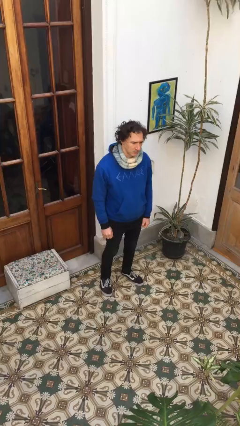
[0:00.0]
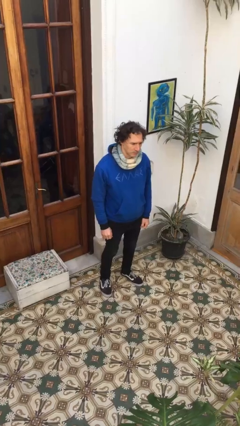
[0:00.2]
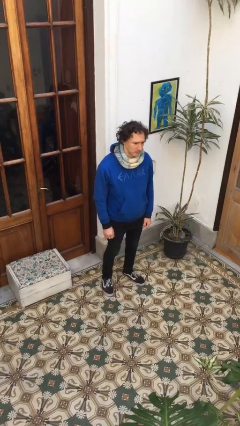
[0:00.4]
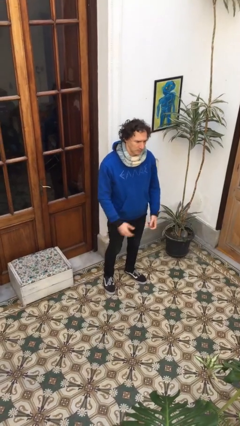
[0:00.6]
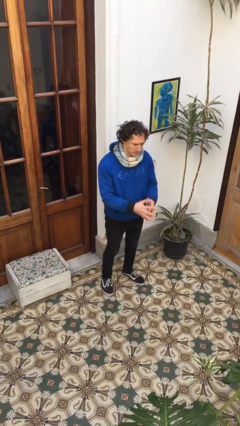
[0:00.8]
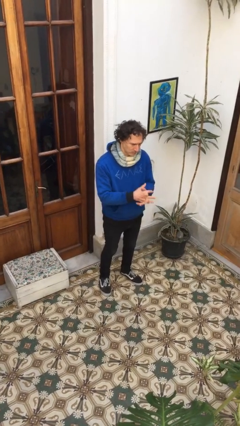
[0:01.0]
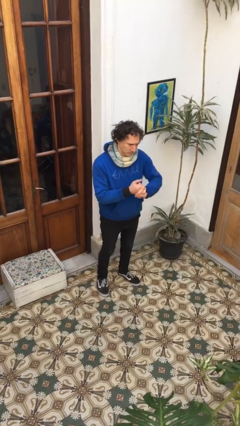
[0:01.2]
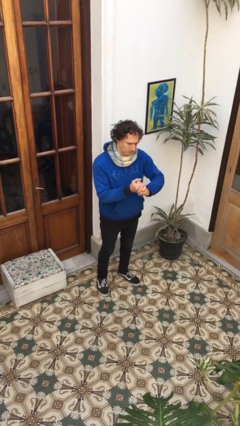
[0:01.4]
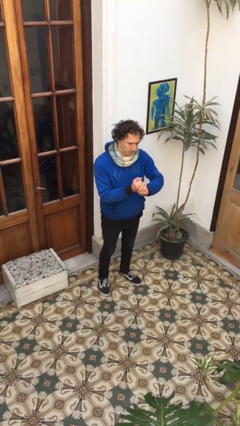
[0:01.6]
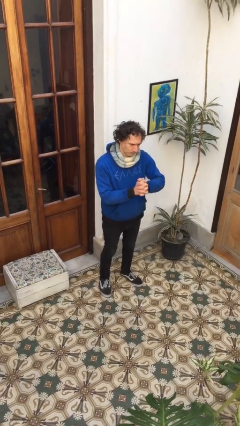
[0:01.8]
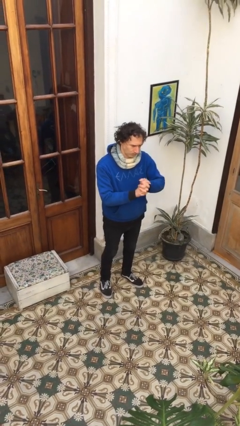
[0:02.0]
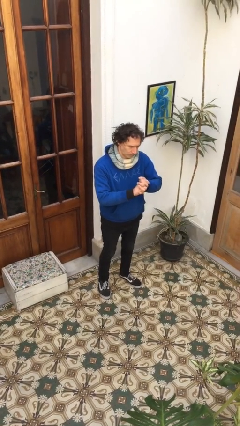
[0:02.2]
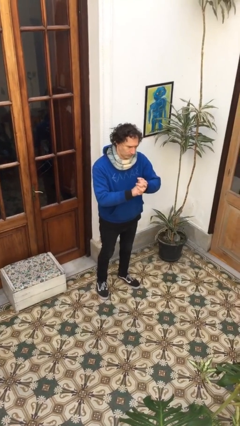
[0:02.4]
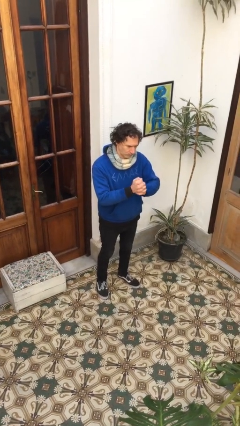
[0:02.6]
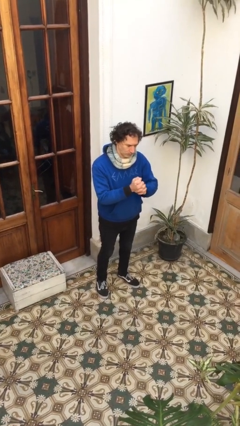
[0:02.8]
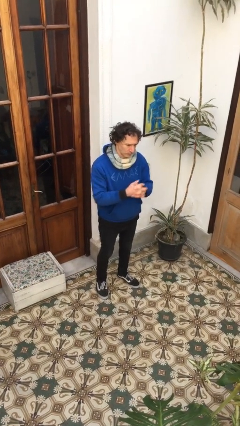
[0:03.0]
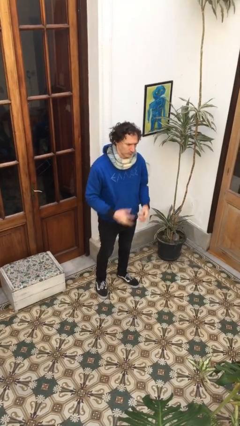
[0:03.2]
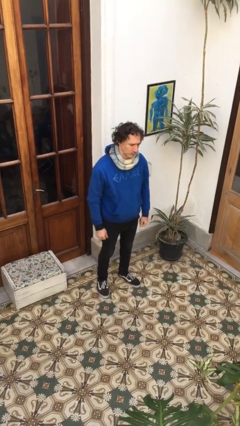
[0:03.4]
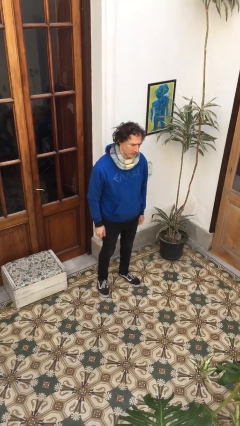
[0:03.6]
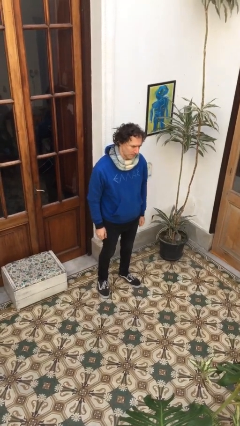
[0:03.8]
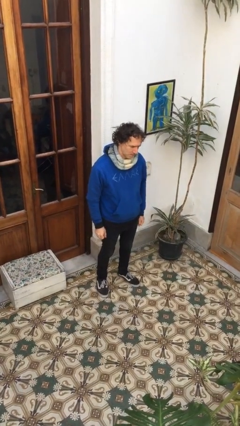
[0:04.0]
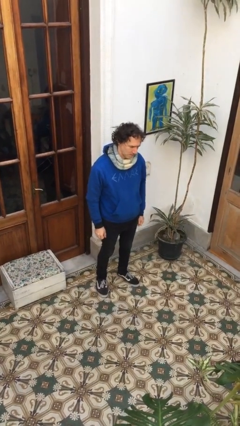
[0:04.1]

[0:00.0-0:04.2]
person cracks knuckles

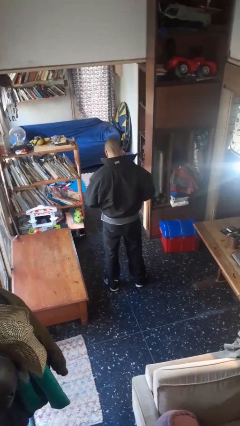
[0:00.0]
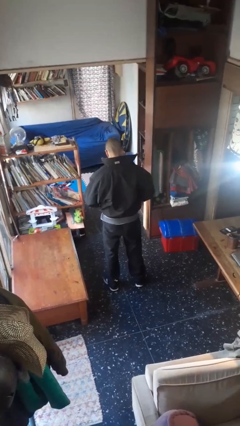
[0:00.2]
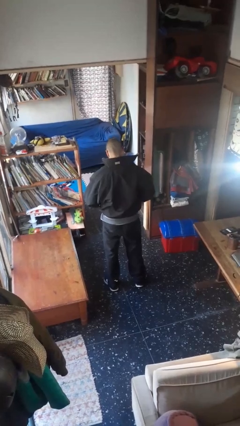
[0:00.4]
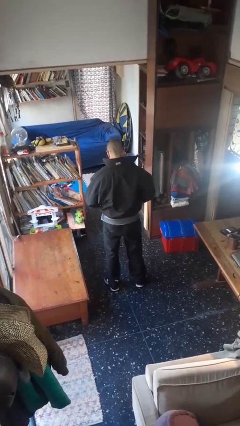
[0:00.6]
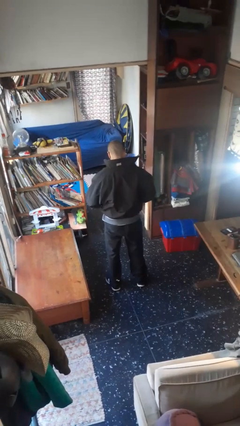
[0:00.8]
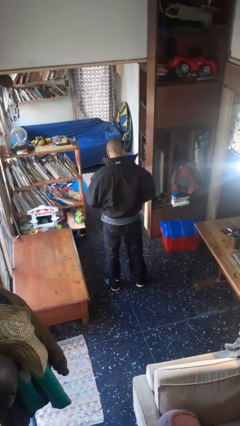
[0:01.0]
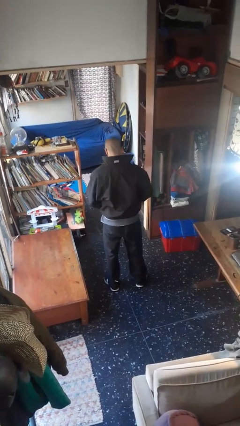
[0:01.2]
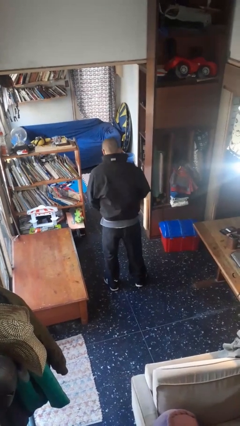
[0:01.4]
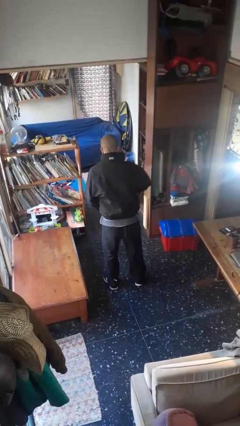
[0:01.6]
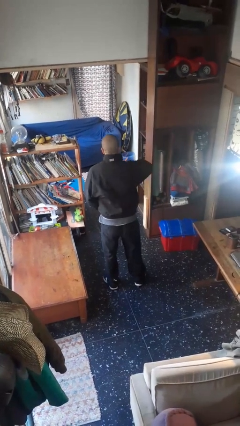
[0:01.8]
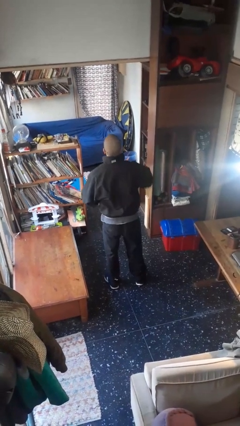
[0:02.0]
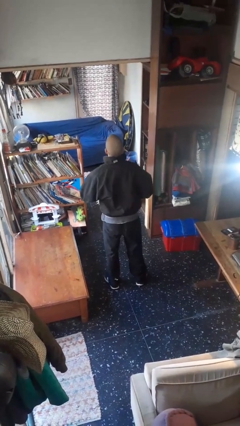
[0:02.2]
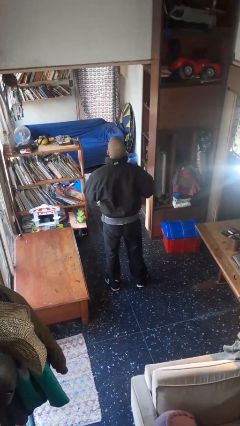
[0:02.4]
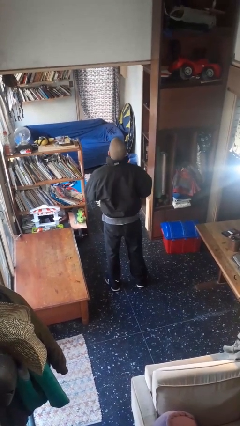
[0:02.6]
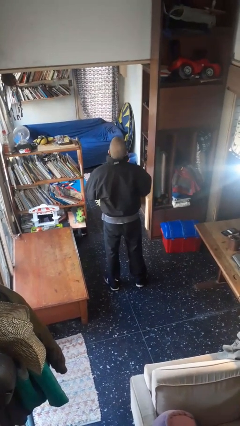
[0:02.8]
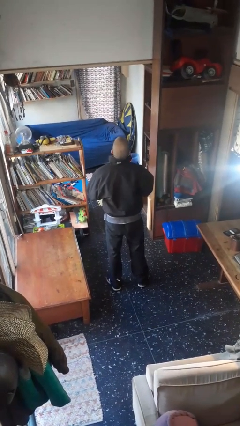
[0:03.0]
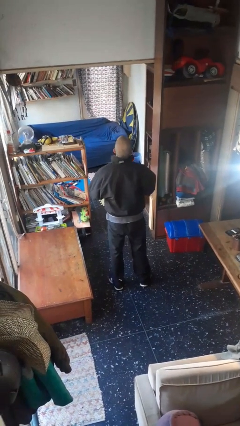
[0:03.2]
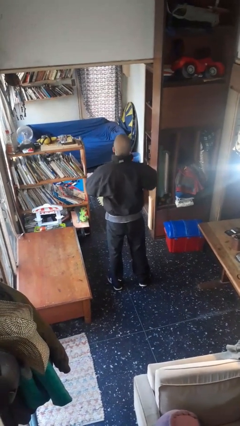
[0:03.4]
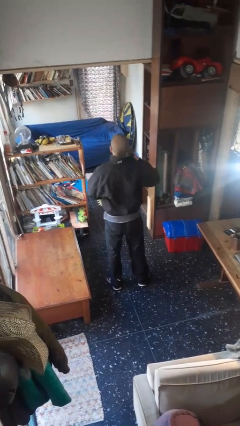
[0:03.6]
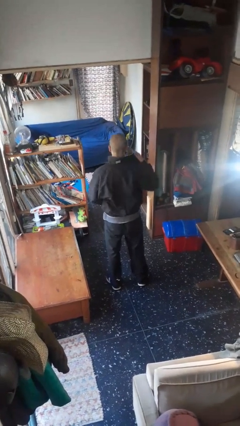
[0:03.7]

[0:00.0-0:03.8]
person zips up jacket

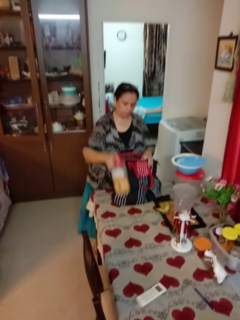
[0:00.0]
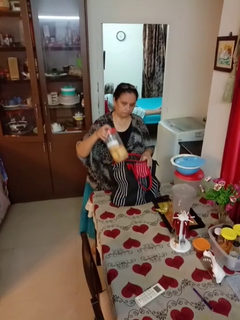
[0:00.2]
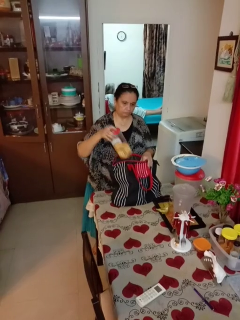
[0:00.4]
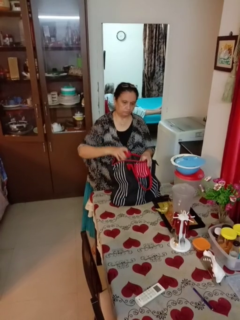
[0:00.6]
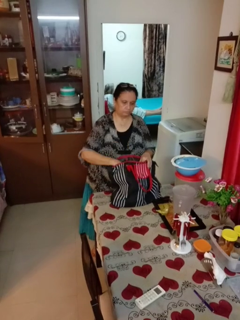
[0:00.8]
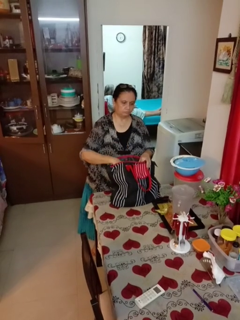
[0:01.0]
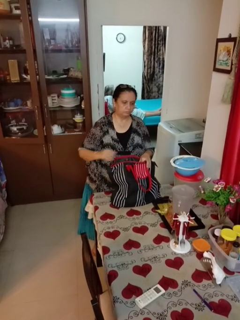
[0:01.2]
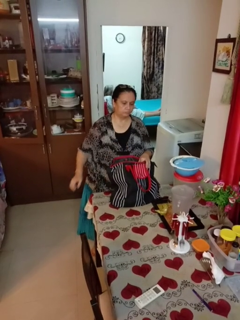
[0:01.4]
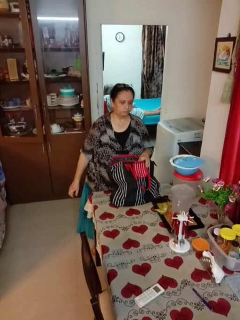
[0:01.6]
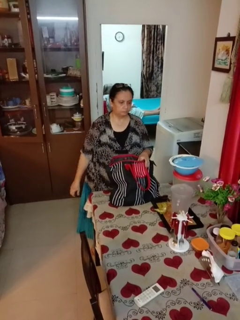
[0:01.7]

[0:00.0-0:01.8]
person puts object into bag

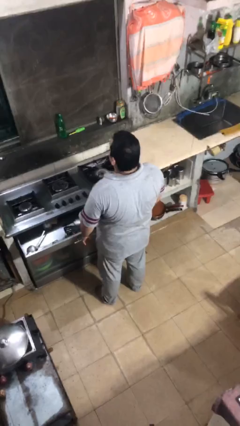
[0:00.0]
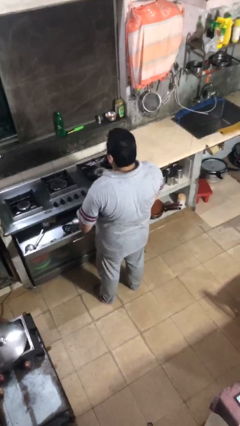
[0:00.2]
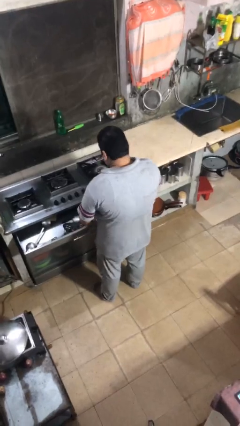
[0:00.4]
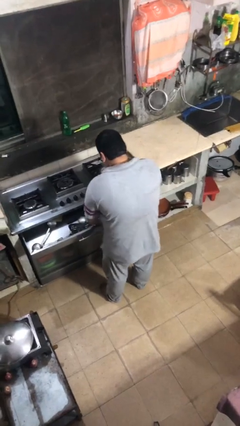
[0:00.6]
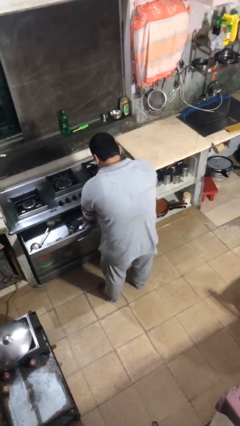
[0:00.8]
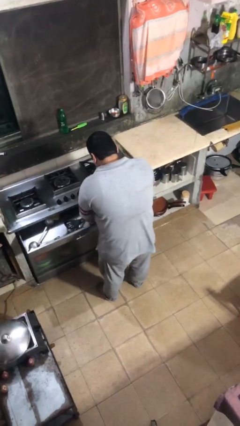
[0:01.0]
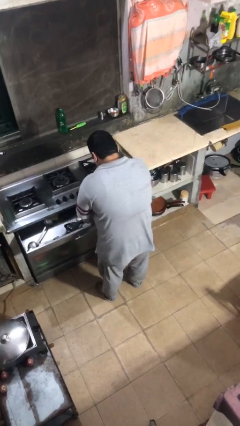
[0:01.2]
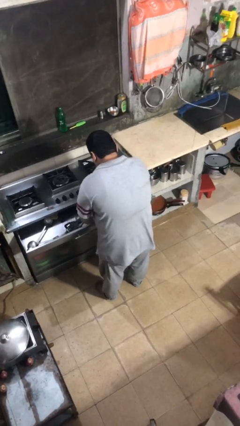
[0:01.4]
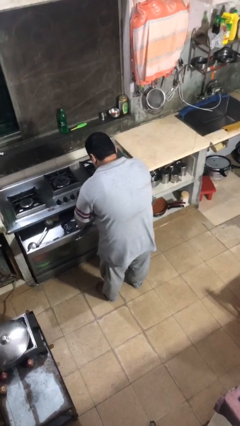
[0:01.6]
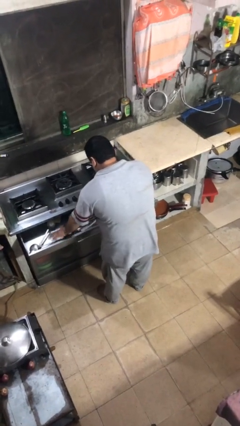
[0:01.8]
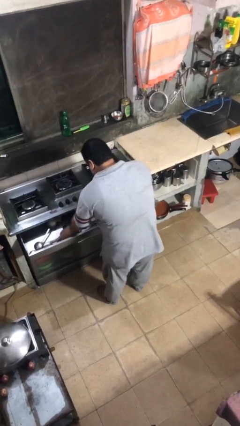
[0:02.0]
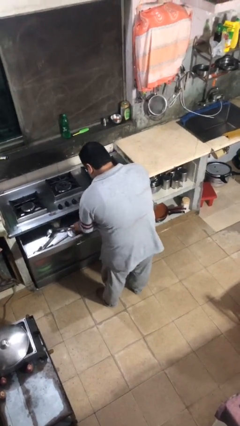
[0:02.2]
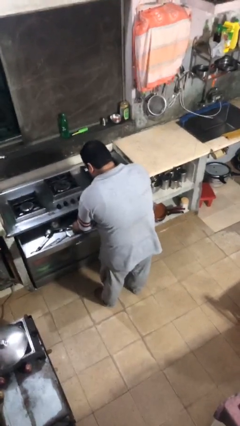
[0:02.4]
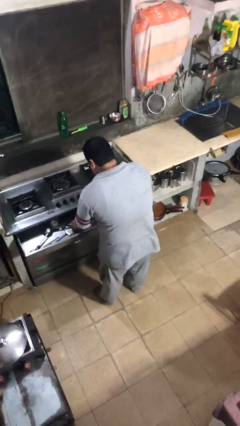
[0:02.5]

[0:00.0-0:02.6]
person searches in kitchen drawer

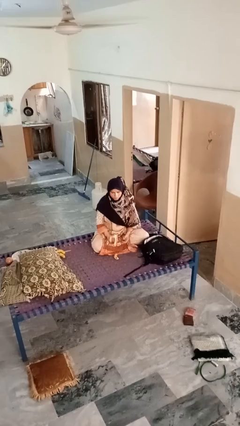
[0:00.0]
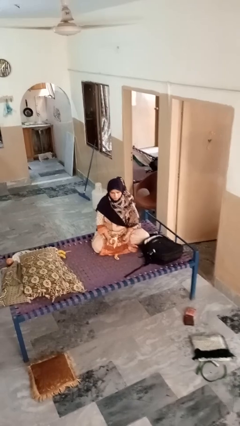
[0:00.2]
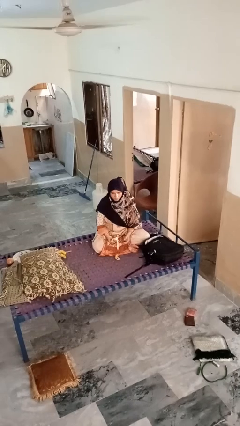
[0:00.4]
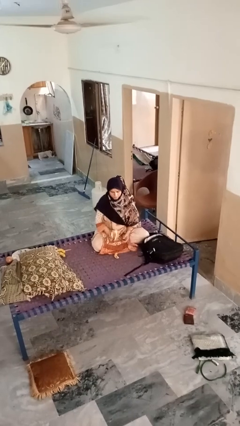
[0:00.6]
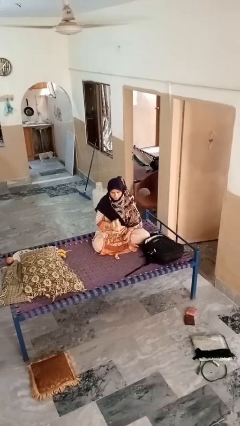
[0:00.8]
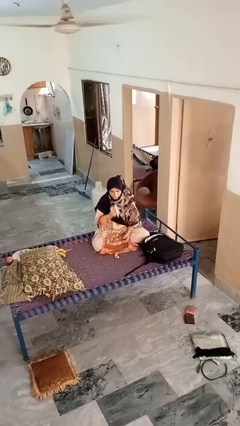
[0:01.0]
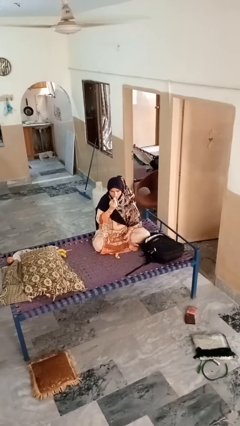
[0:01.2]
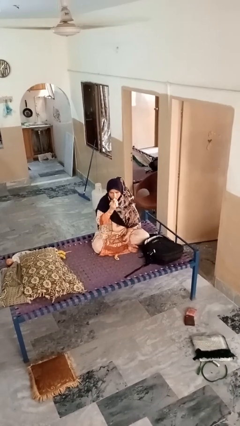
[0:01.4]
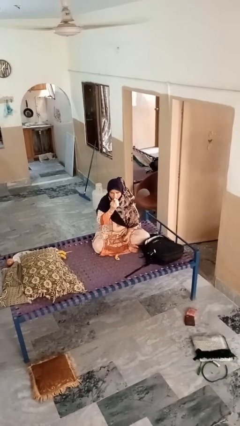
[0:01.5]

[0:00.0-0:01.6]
person eats banana

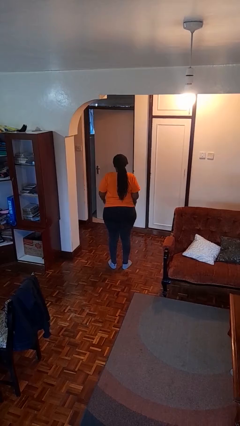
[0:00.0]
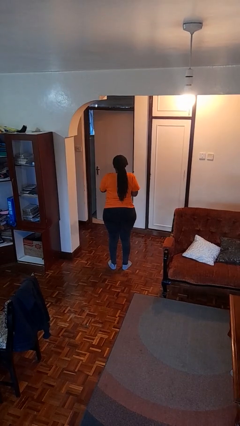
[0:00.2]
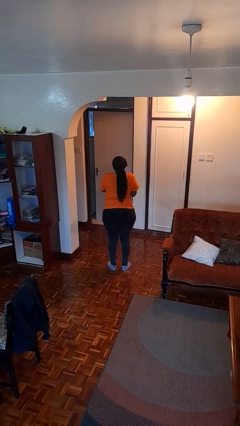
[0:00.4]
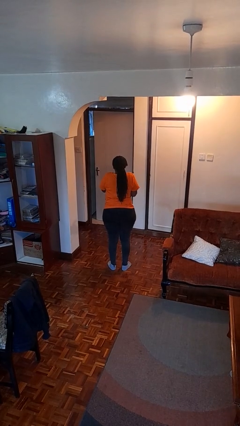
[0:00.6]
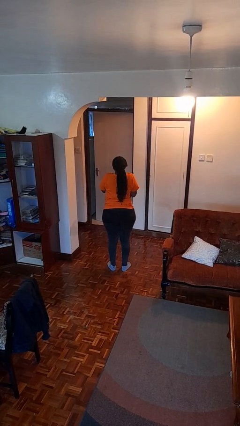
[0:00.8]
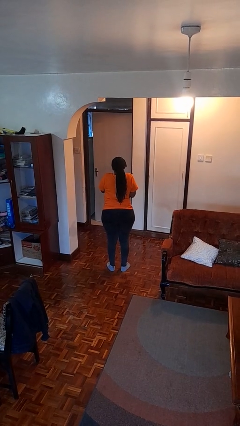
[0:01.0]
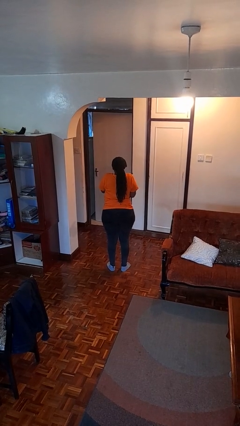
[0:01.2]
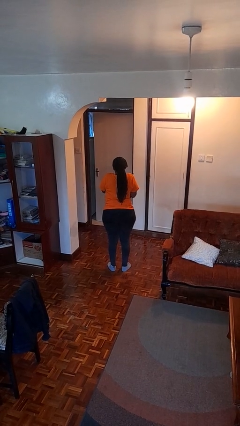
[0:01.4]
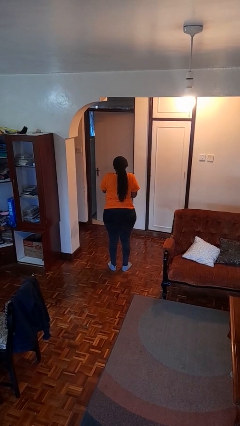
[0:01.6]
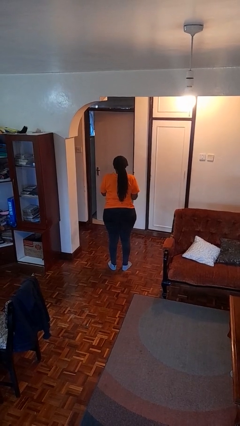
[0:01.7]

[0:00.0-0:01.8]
person shrugs

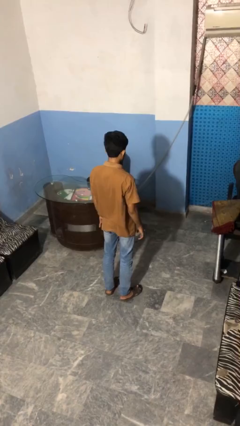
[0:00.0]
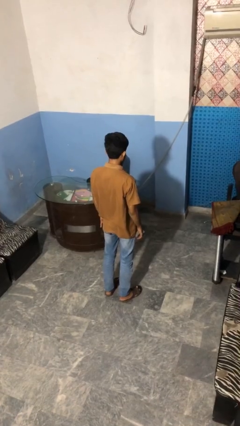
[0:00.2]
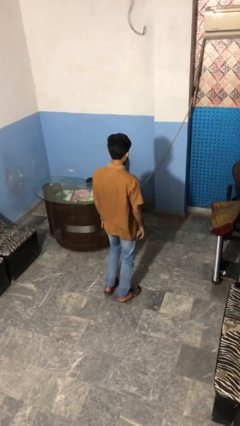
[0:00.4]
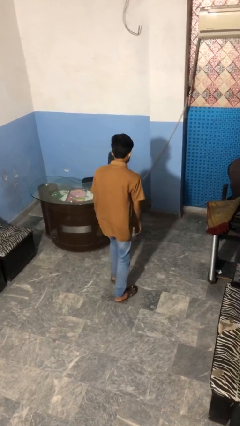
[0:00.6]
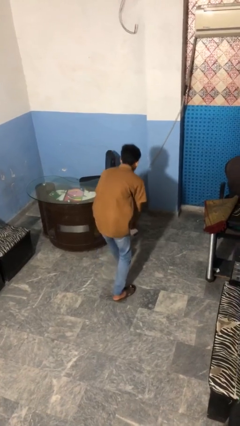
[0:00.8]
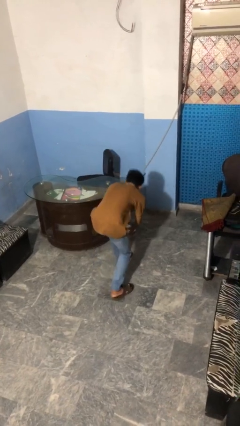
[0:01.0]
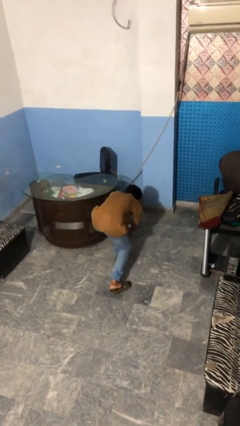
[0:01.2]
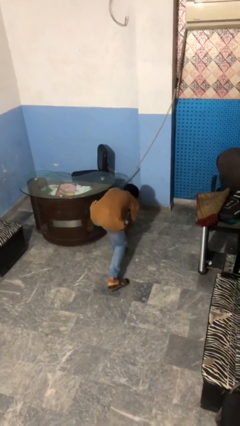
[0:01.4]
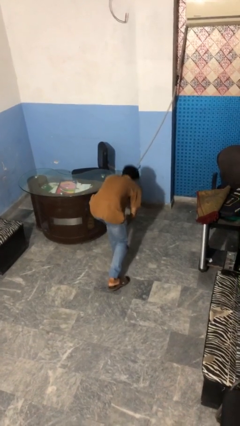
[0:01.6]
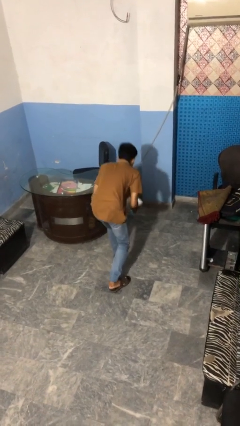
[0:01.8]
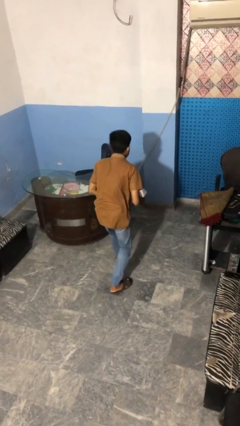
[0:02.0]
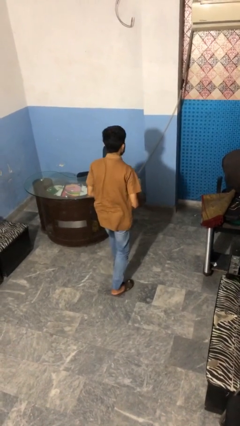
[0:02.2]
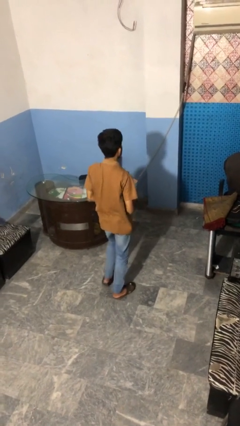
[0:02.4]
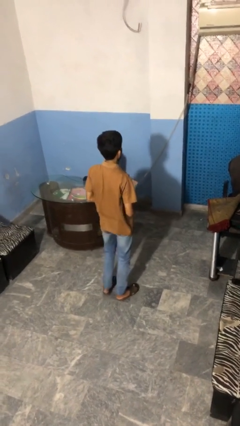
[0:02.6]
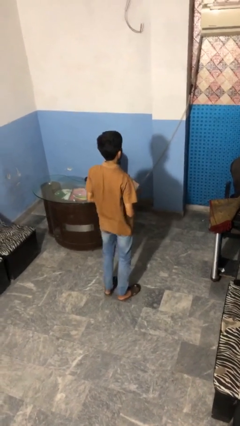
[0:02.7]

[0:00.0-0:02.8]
person picks up object from floor
